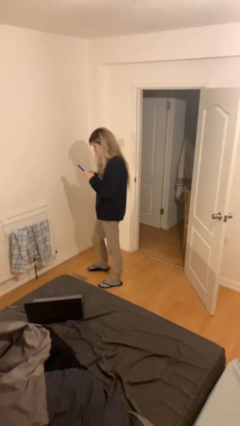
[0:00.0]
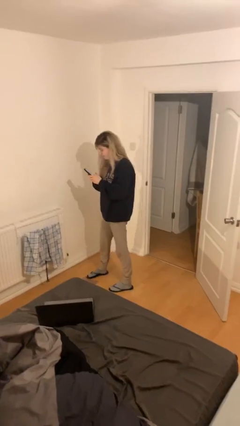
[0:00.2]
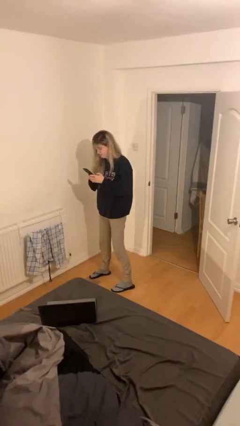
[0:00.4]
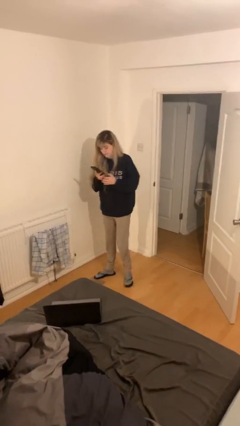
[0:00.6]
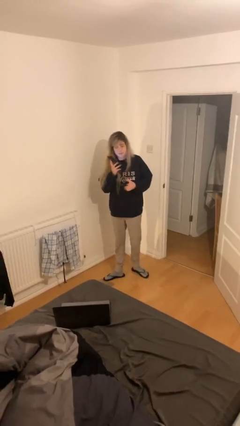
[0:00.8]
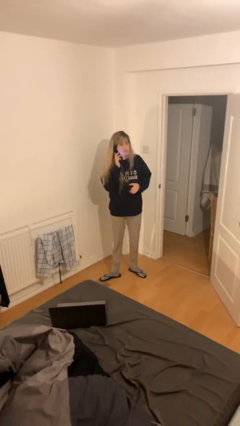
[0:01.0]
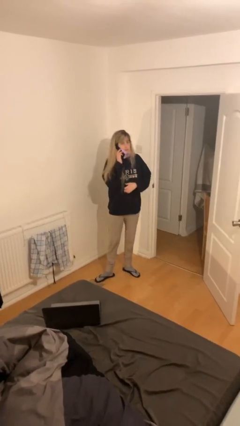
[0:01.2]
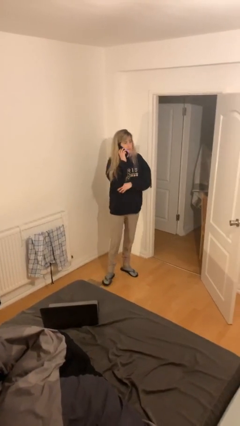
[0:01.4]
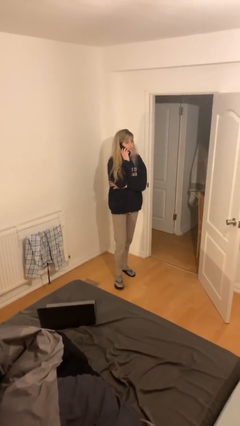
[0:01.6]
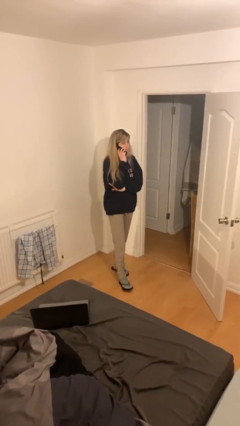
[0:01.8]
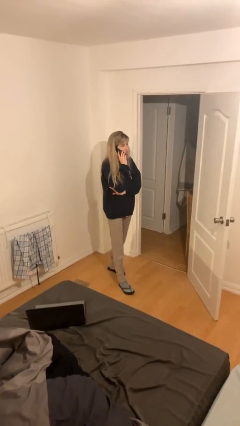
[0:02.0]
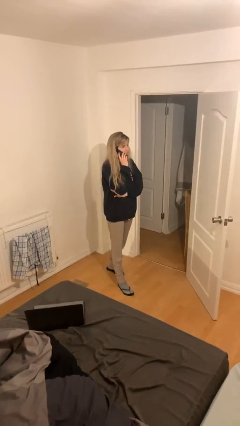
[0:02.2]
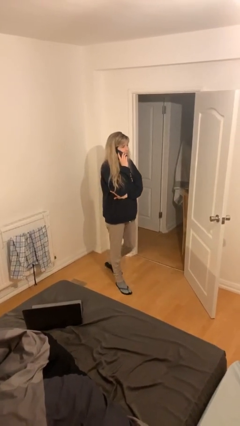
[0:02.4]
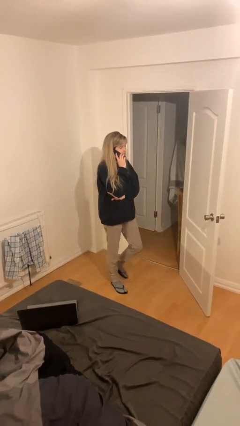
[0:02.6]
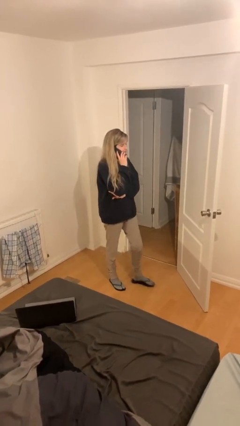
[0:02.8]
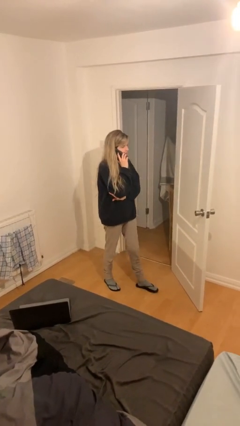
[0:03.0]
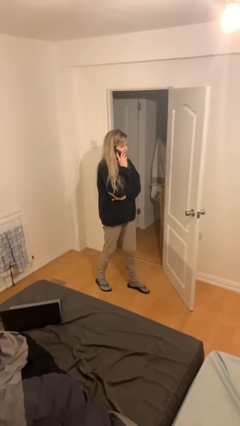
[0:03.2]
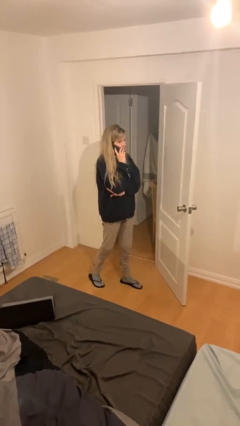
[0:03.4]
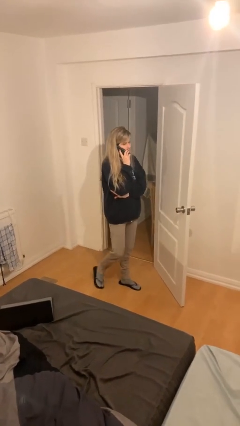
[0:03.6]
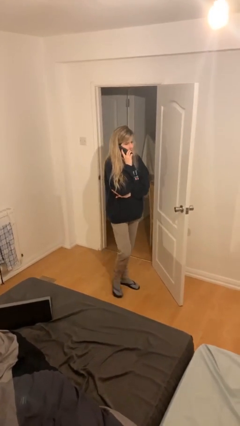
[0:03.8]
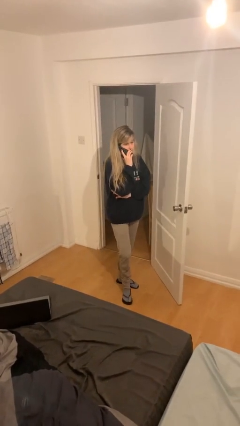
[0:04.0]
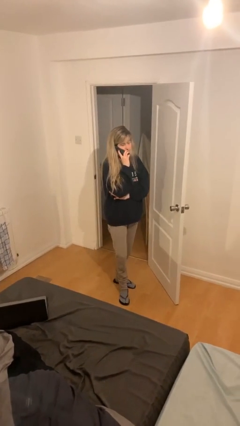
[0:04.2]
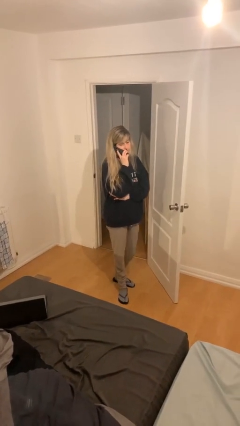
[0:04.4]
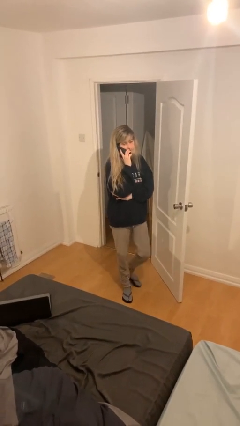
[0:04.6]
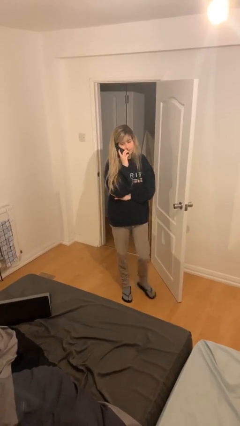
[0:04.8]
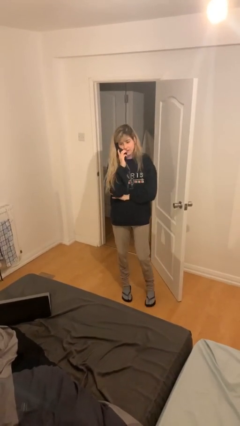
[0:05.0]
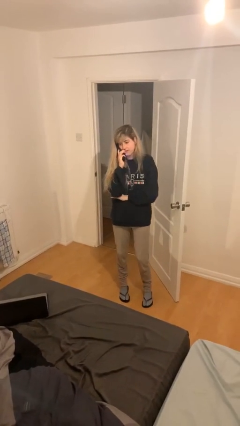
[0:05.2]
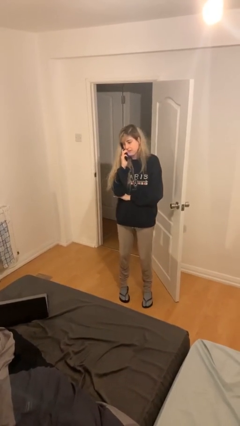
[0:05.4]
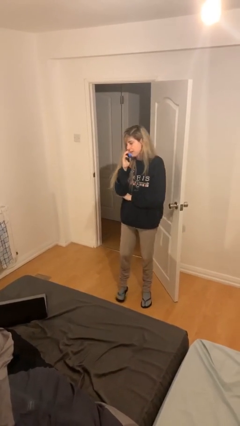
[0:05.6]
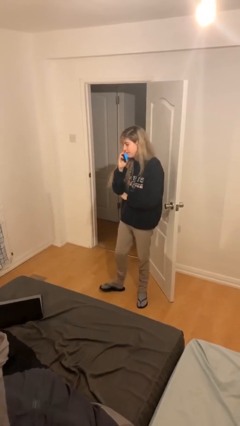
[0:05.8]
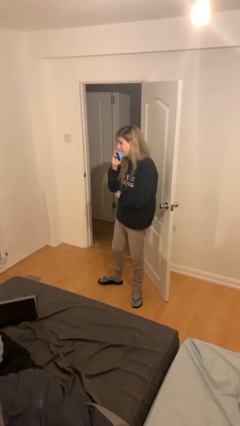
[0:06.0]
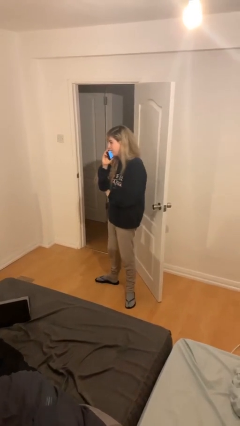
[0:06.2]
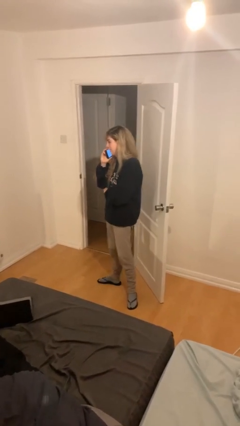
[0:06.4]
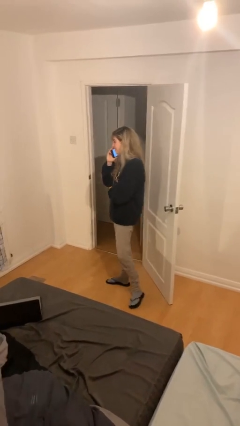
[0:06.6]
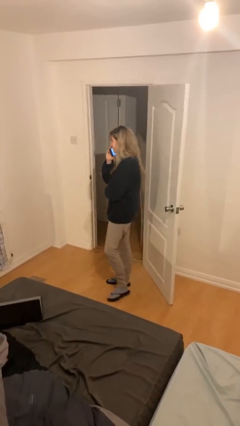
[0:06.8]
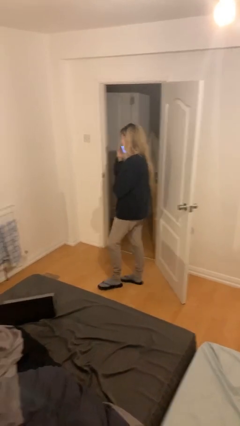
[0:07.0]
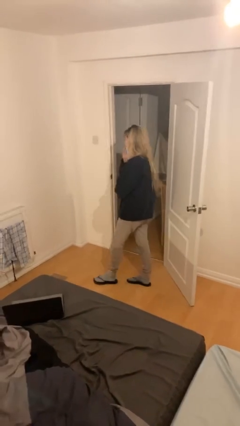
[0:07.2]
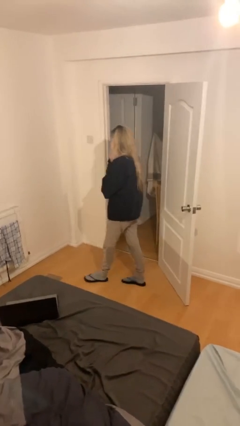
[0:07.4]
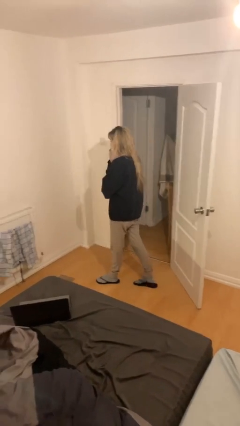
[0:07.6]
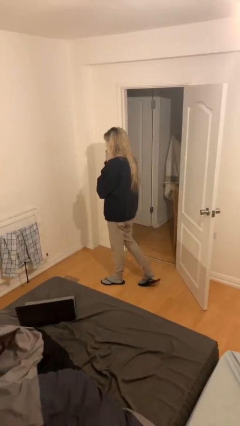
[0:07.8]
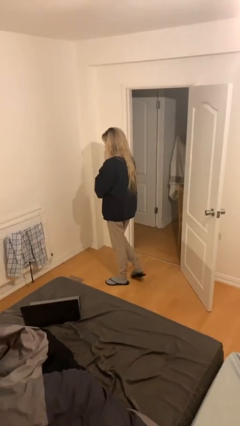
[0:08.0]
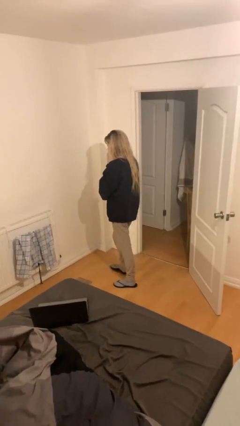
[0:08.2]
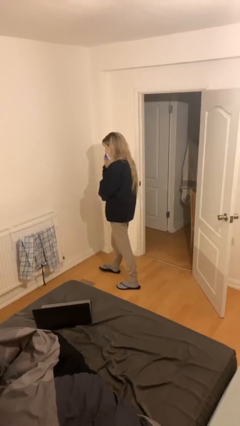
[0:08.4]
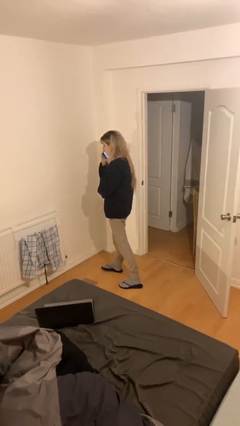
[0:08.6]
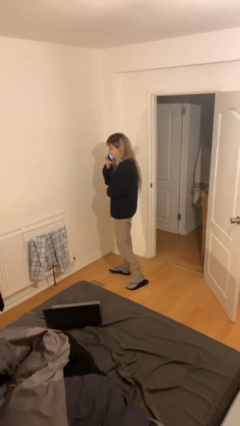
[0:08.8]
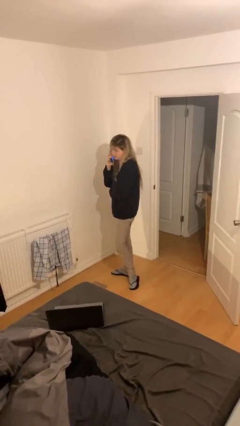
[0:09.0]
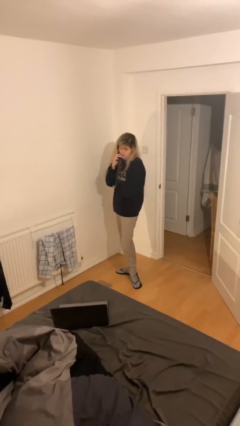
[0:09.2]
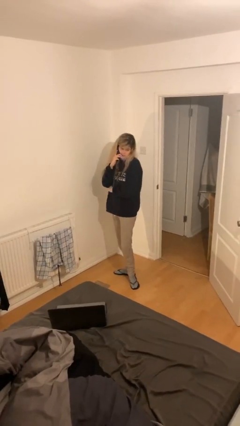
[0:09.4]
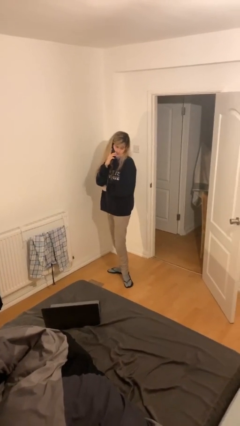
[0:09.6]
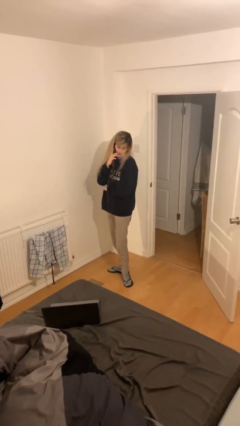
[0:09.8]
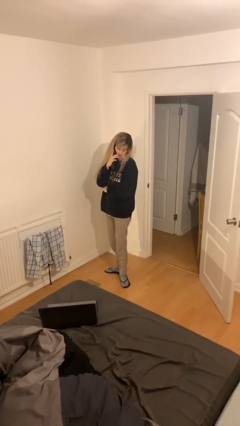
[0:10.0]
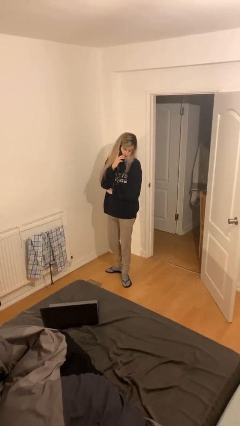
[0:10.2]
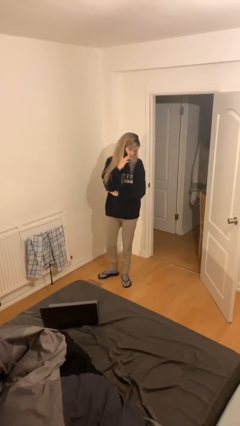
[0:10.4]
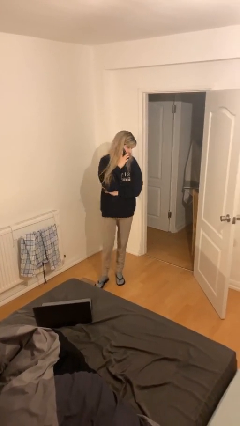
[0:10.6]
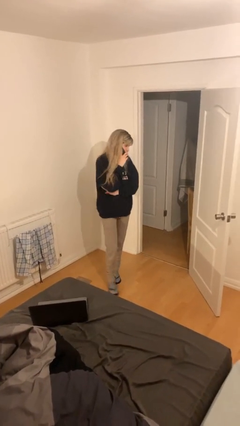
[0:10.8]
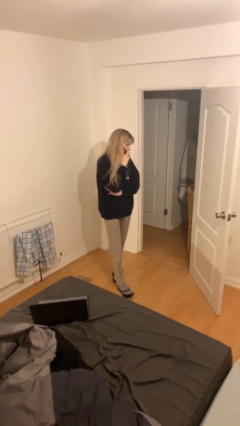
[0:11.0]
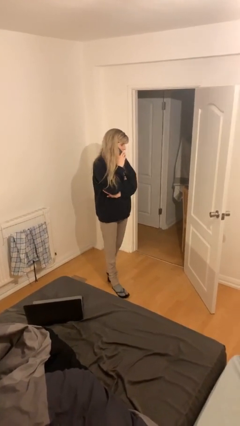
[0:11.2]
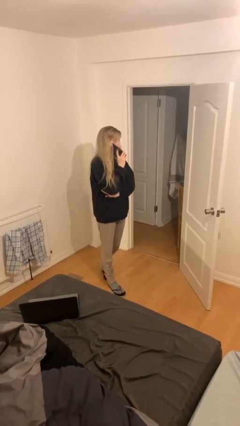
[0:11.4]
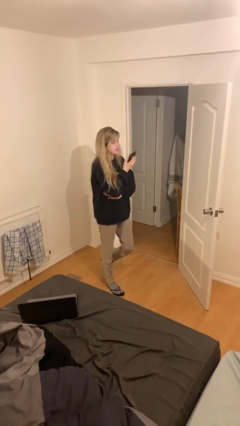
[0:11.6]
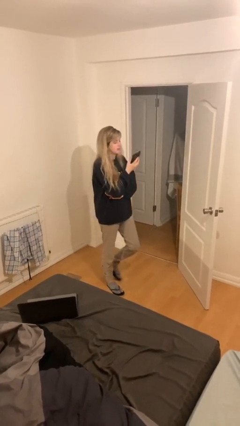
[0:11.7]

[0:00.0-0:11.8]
person talks on phone

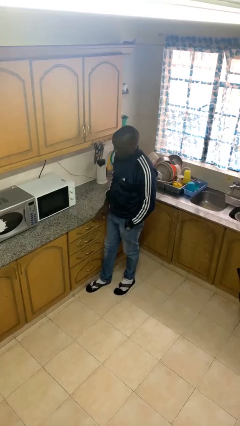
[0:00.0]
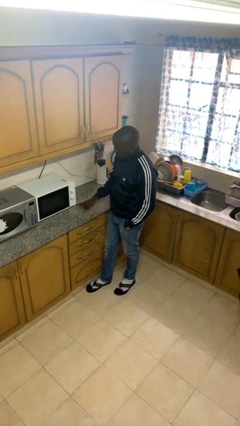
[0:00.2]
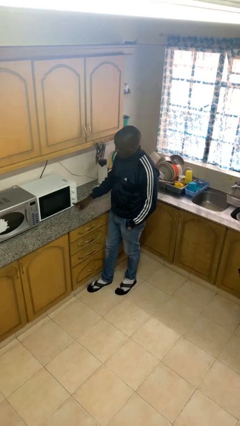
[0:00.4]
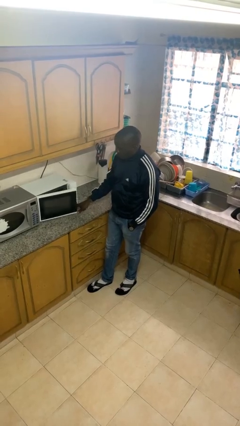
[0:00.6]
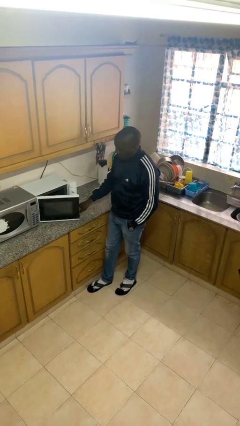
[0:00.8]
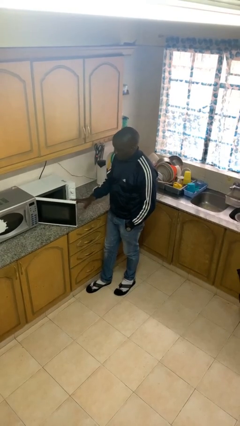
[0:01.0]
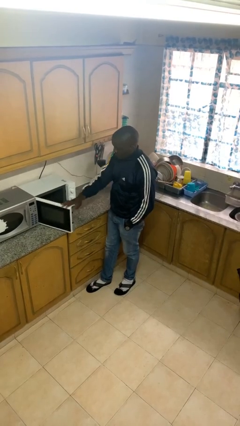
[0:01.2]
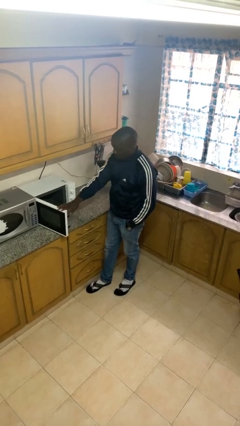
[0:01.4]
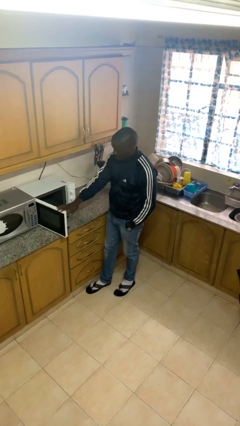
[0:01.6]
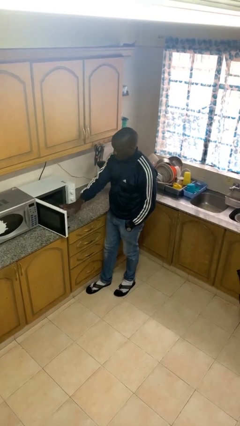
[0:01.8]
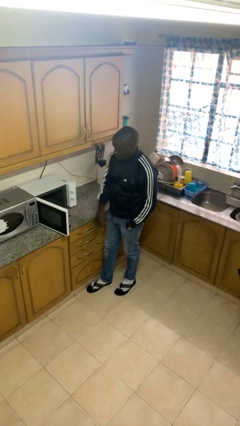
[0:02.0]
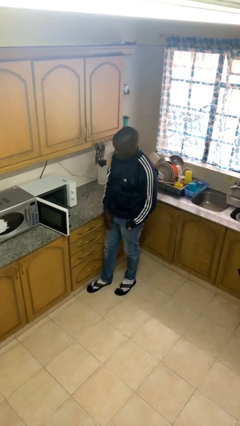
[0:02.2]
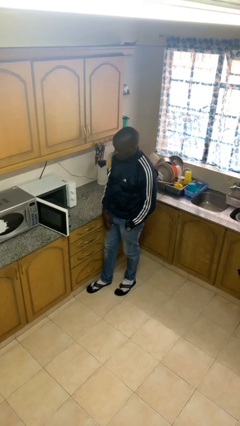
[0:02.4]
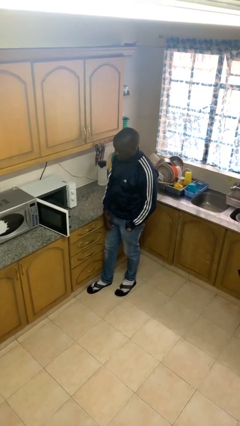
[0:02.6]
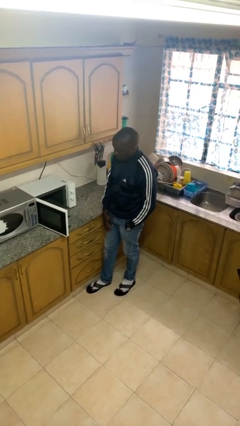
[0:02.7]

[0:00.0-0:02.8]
person opens microwave

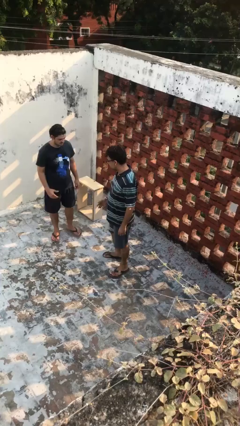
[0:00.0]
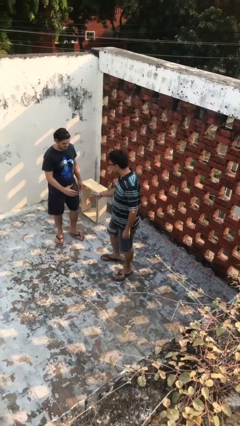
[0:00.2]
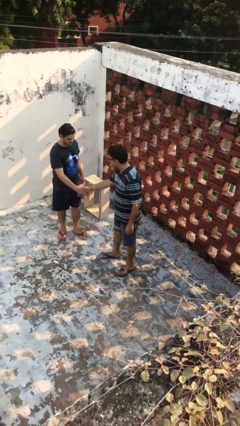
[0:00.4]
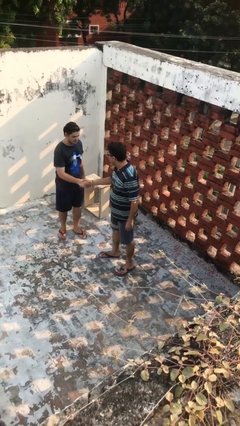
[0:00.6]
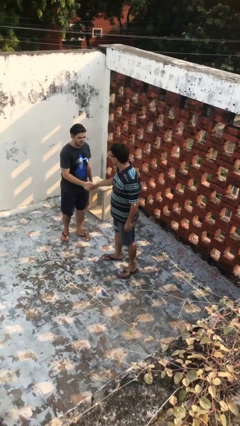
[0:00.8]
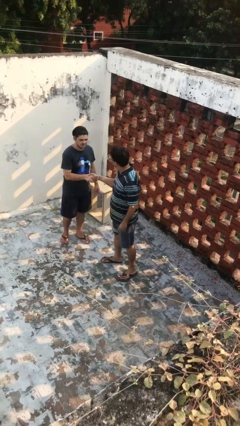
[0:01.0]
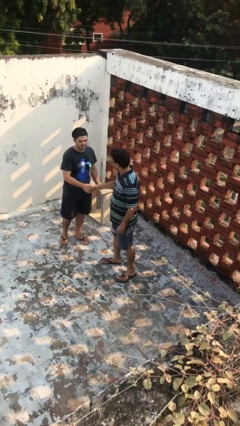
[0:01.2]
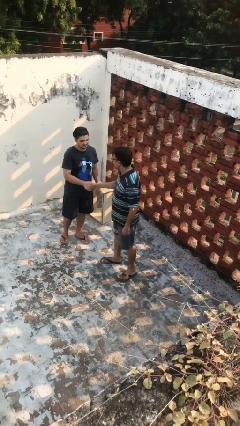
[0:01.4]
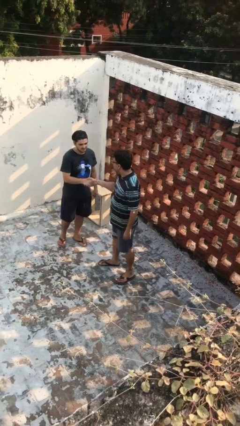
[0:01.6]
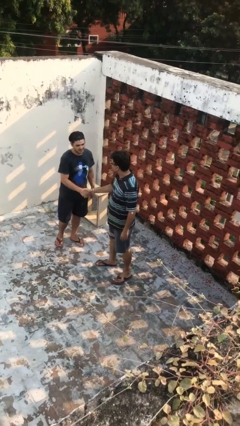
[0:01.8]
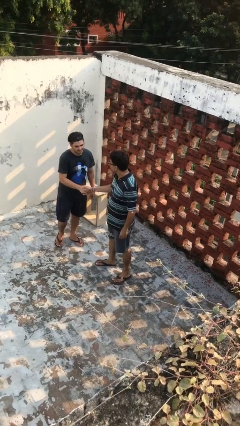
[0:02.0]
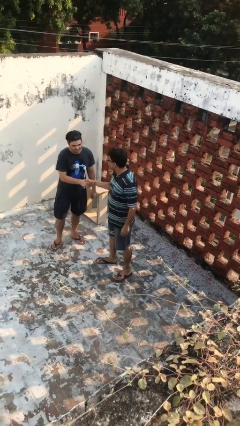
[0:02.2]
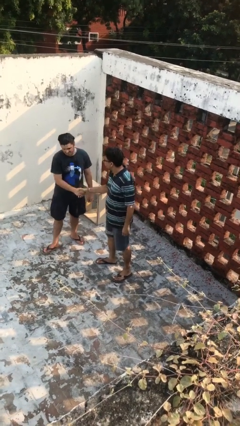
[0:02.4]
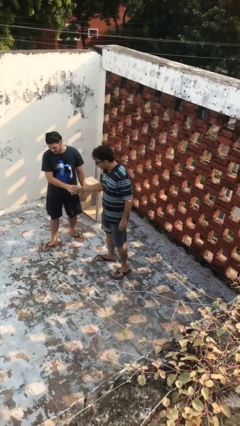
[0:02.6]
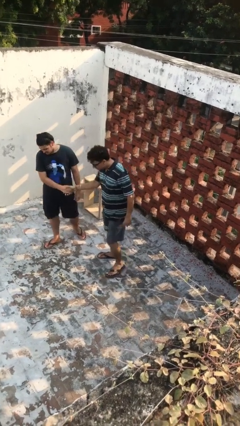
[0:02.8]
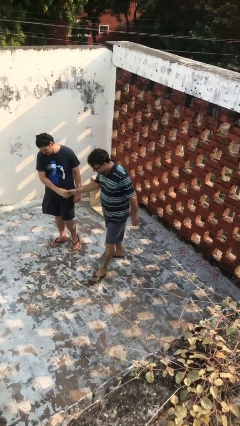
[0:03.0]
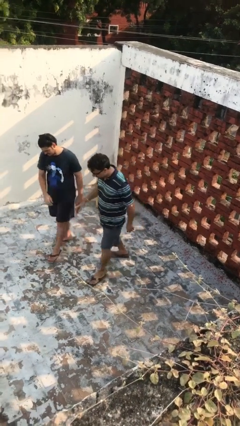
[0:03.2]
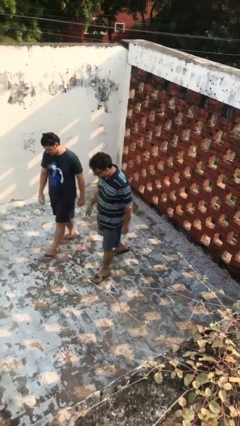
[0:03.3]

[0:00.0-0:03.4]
person shakes hand
